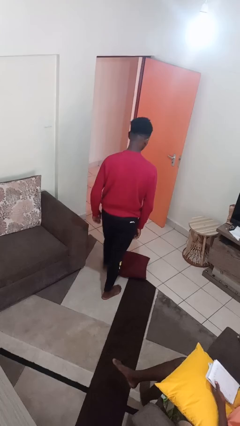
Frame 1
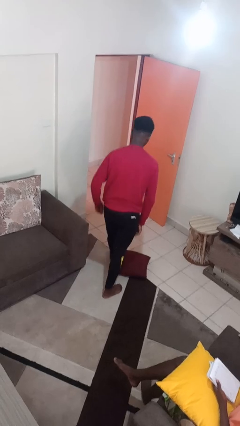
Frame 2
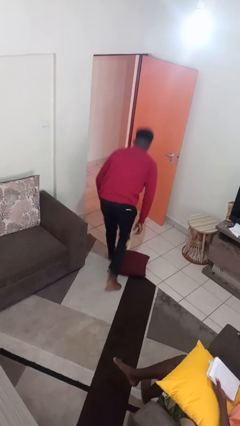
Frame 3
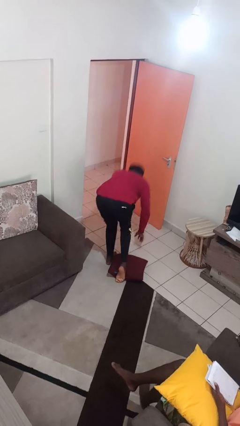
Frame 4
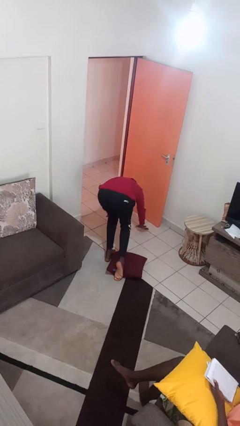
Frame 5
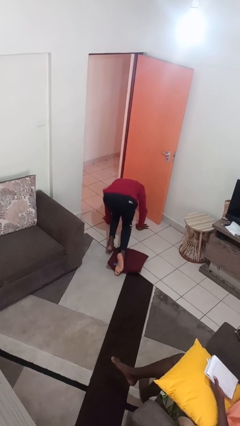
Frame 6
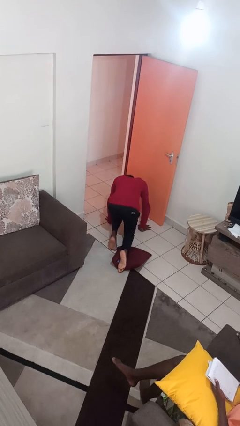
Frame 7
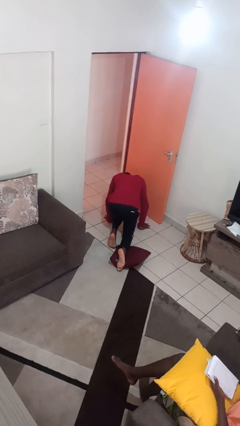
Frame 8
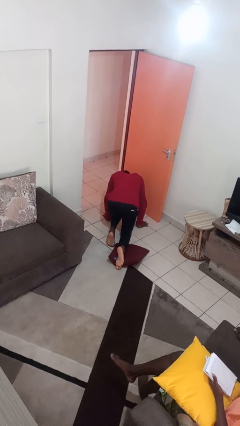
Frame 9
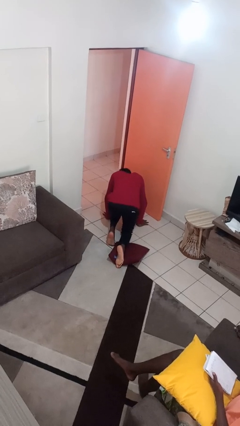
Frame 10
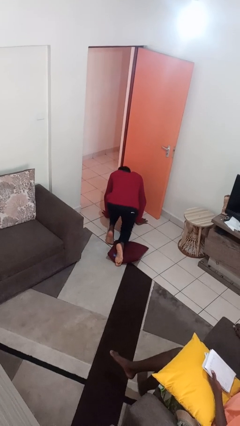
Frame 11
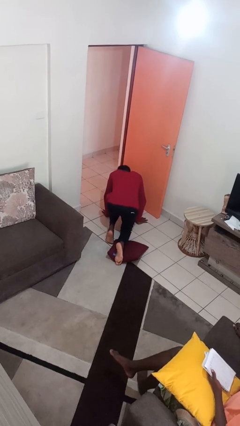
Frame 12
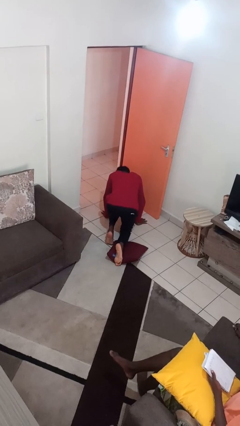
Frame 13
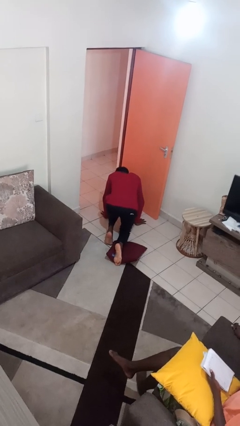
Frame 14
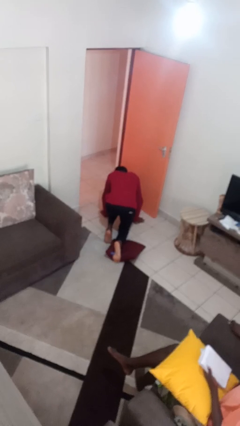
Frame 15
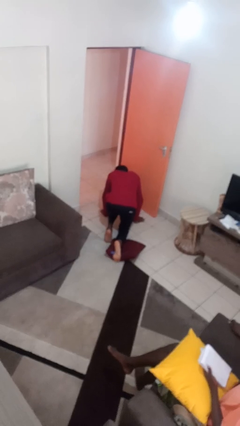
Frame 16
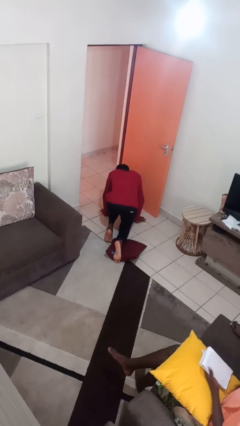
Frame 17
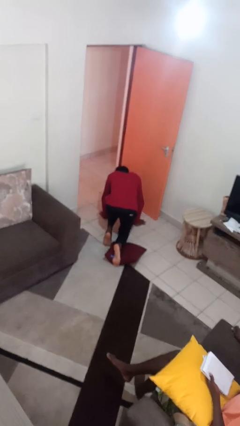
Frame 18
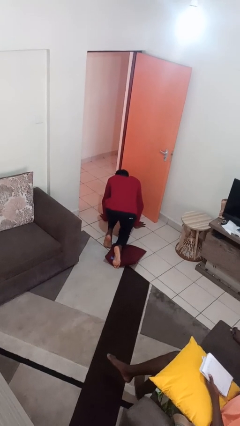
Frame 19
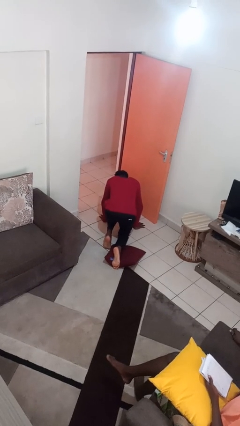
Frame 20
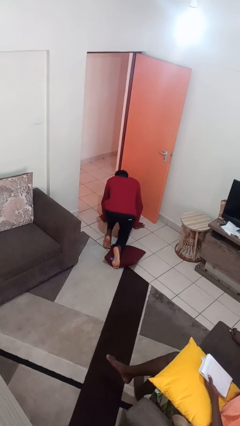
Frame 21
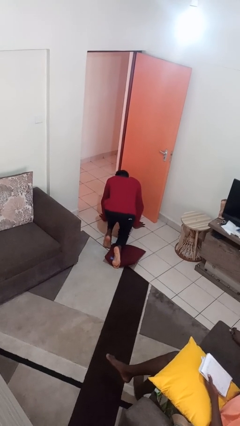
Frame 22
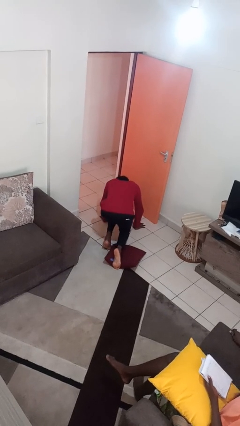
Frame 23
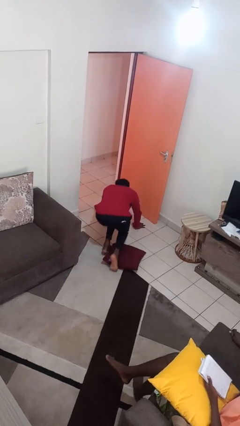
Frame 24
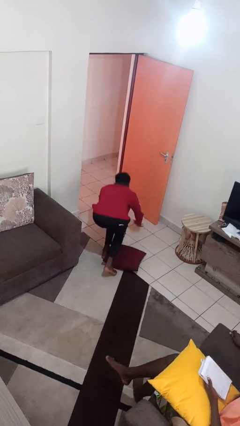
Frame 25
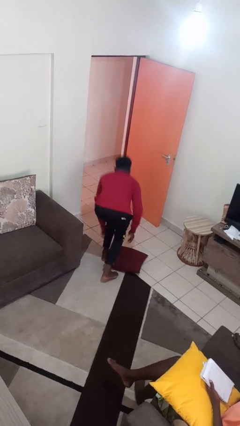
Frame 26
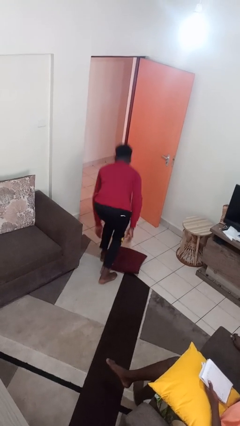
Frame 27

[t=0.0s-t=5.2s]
person trips on object on floor

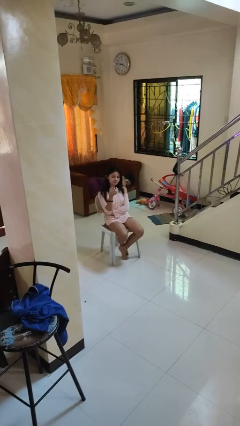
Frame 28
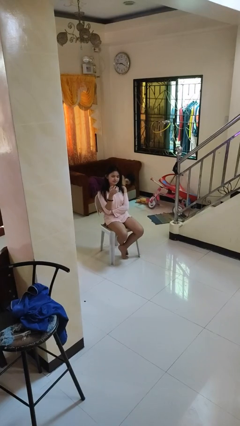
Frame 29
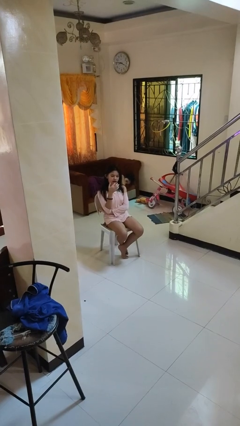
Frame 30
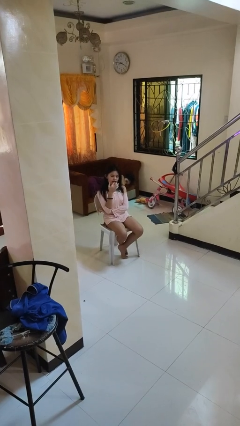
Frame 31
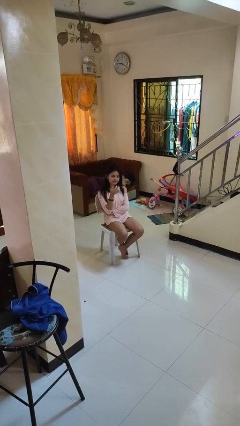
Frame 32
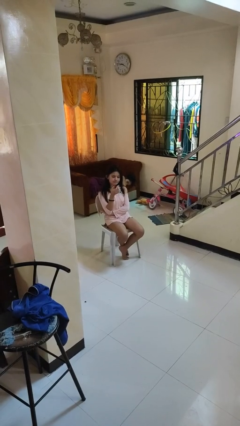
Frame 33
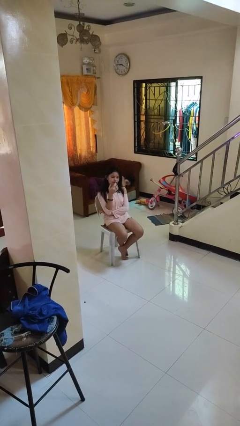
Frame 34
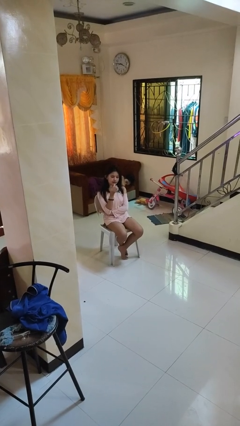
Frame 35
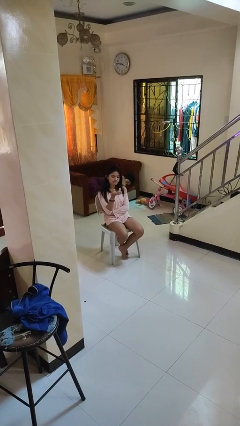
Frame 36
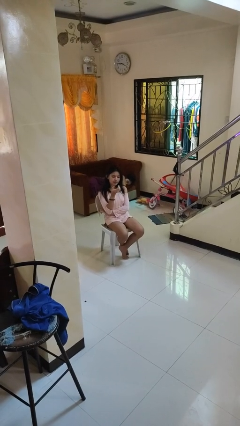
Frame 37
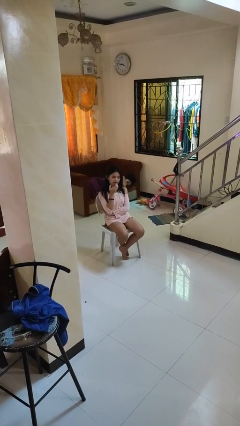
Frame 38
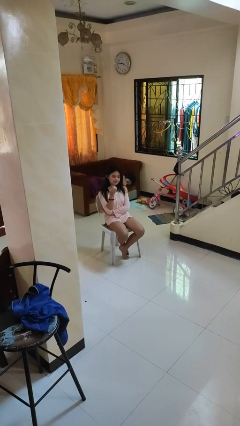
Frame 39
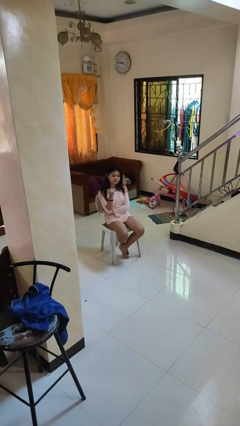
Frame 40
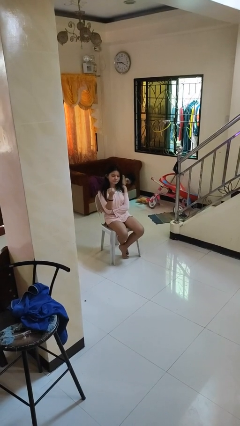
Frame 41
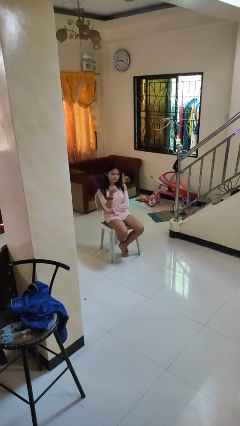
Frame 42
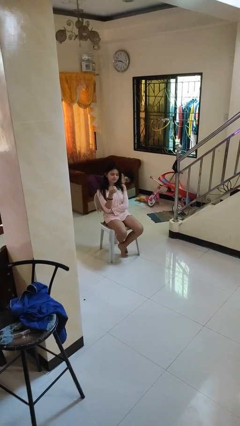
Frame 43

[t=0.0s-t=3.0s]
person licks fingers

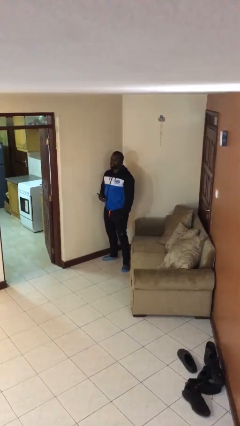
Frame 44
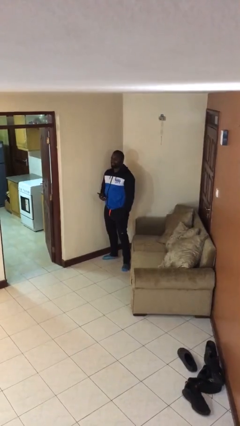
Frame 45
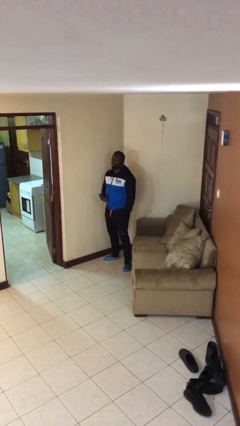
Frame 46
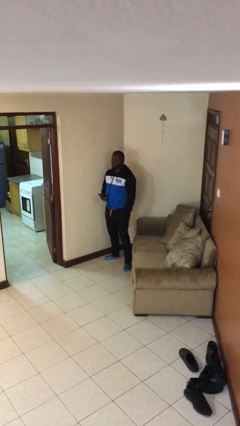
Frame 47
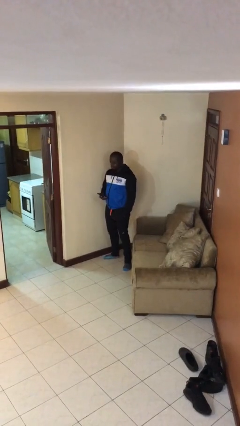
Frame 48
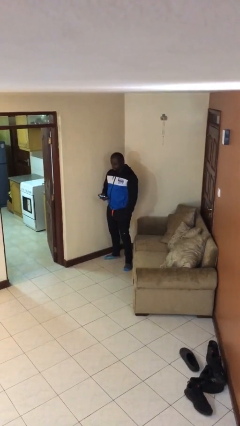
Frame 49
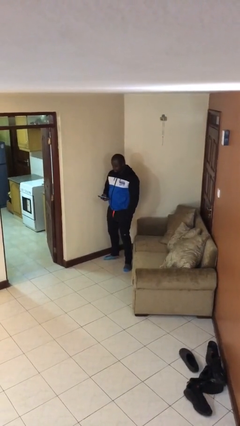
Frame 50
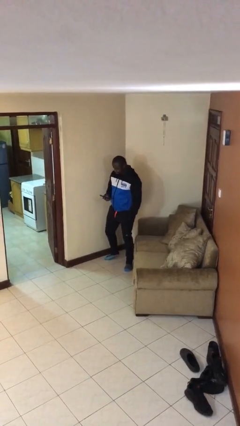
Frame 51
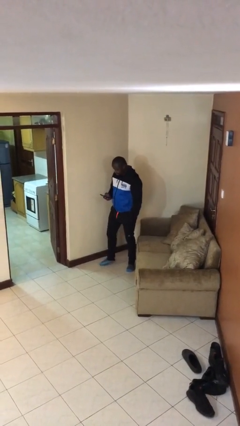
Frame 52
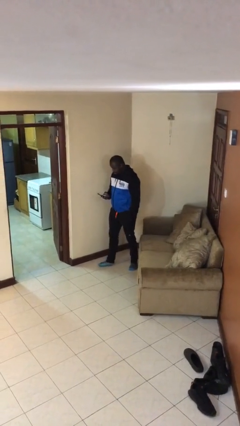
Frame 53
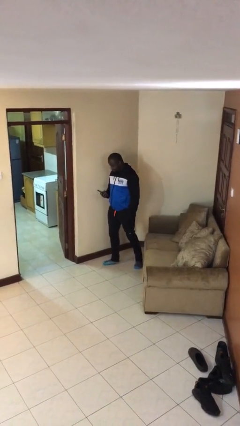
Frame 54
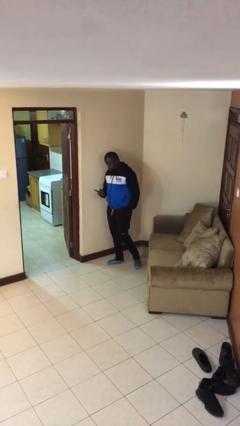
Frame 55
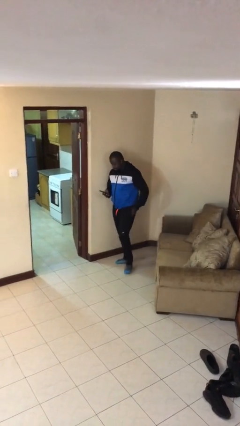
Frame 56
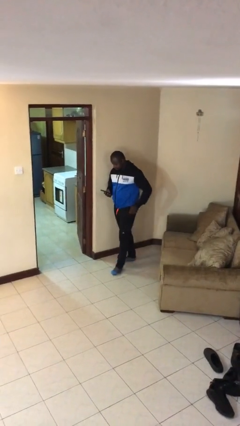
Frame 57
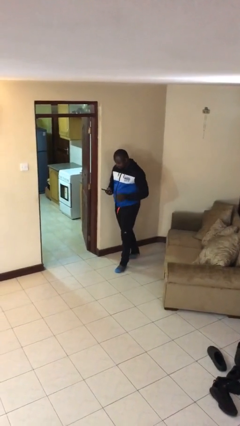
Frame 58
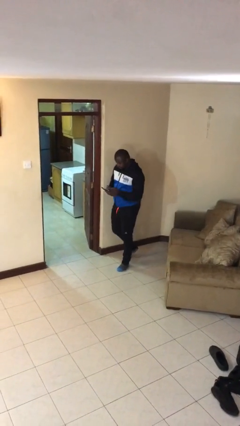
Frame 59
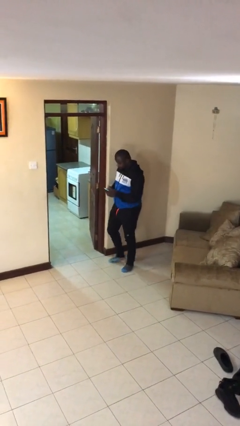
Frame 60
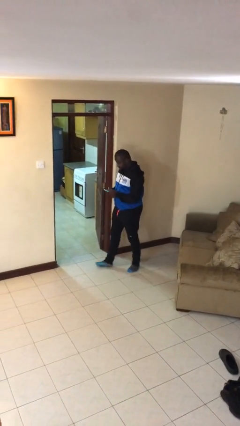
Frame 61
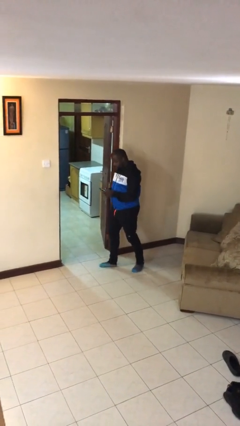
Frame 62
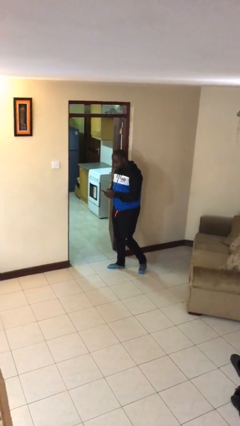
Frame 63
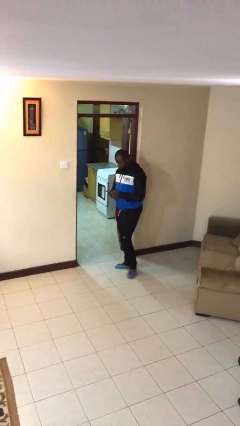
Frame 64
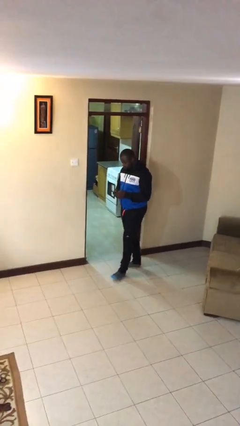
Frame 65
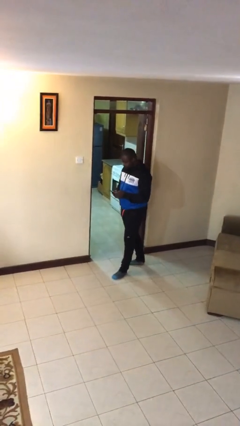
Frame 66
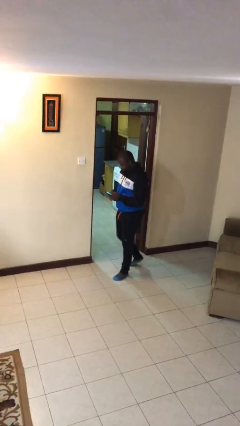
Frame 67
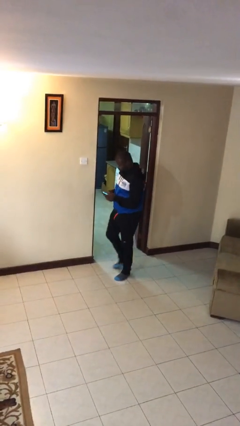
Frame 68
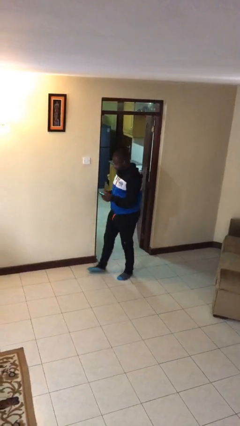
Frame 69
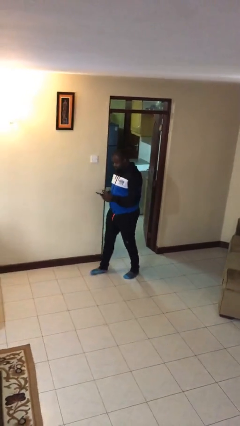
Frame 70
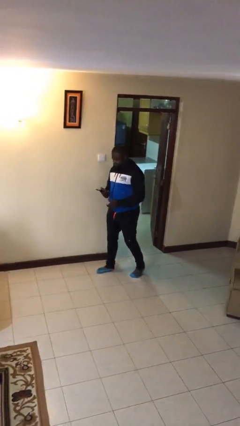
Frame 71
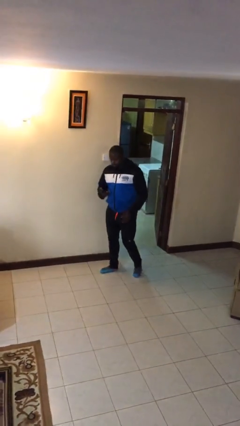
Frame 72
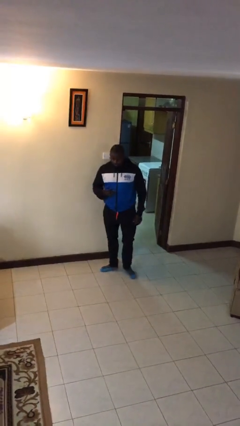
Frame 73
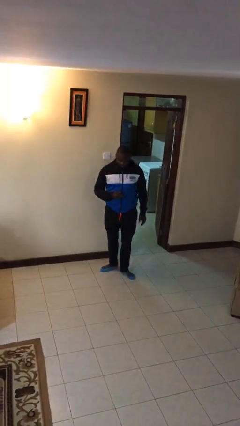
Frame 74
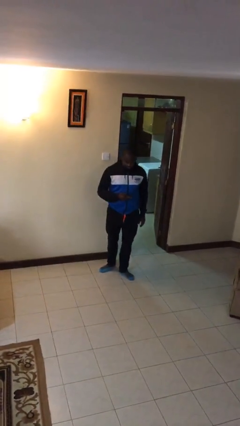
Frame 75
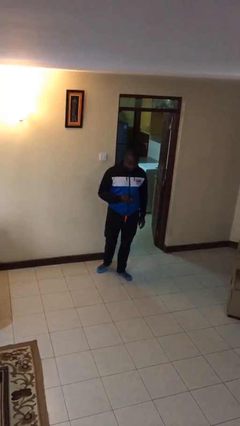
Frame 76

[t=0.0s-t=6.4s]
person texts on phone

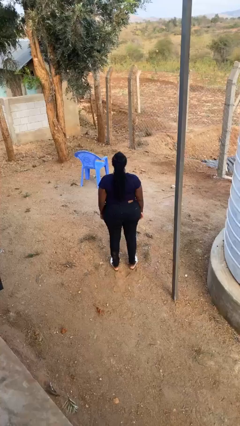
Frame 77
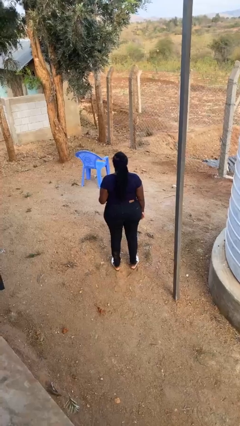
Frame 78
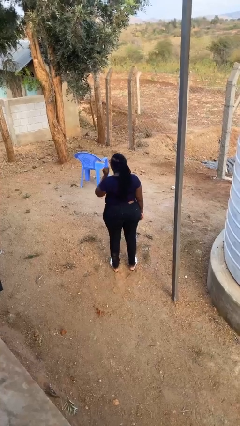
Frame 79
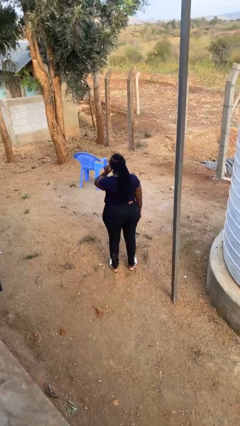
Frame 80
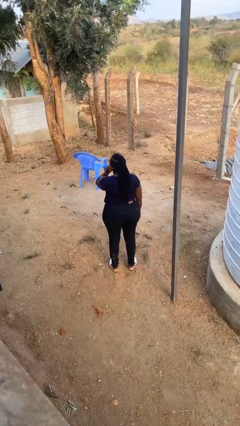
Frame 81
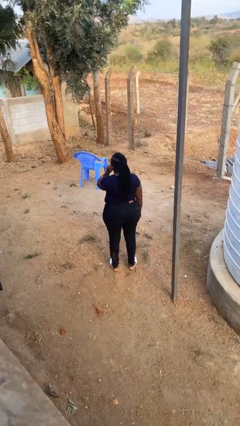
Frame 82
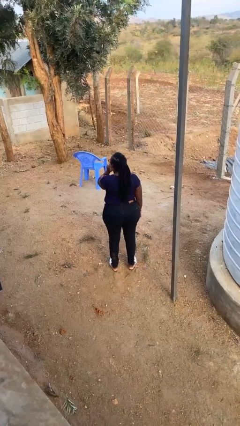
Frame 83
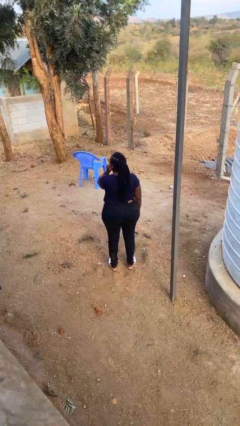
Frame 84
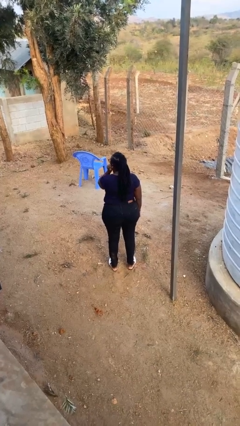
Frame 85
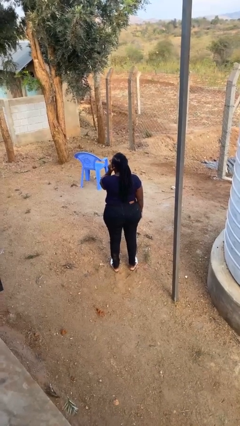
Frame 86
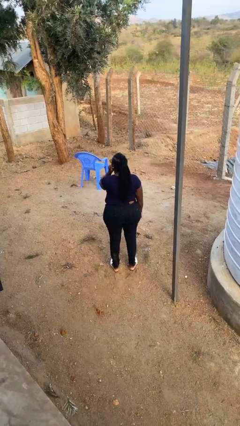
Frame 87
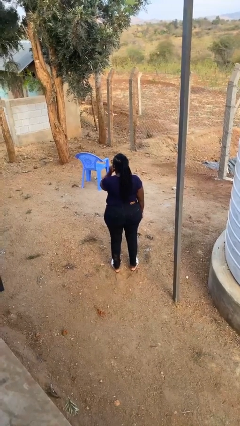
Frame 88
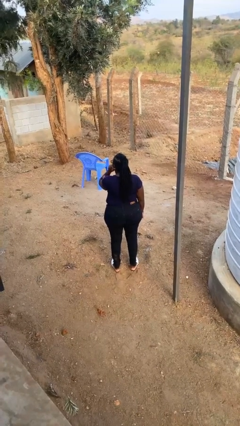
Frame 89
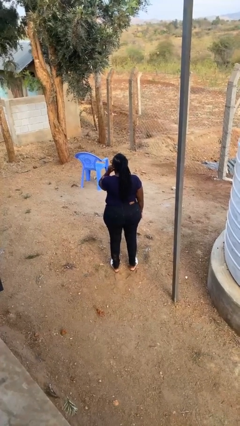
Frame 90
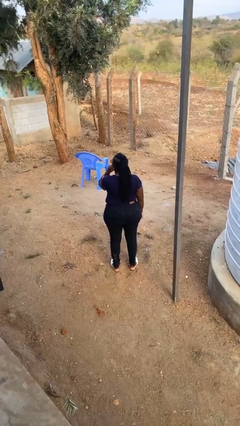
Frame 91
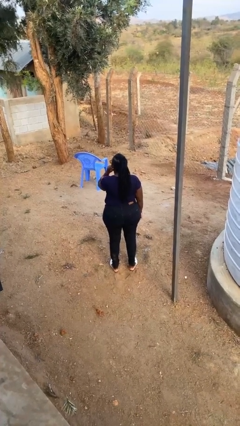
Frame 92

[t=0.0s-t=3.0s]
person touches earlobe
